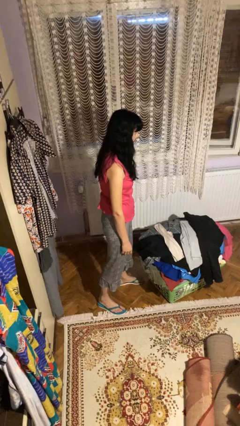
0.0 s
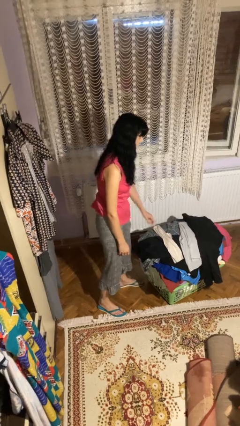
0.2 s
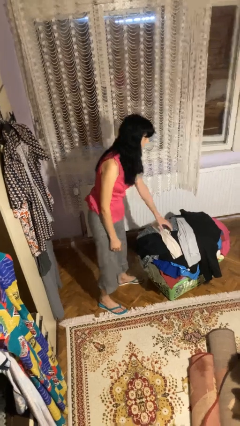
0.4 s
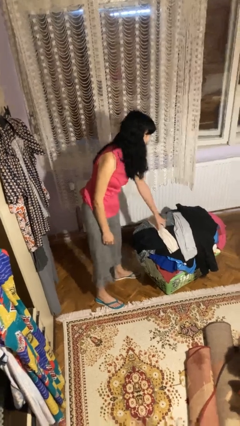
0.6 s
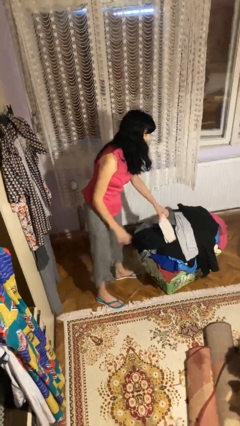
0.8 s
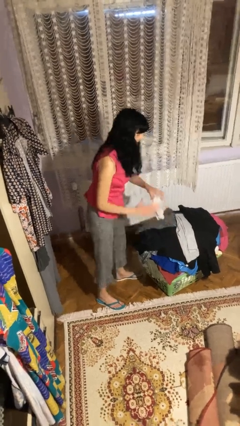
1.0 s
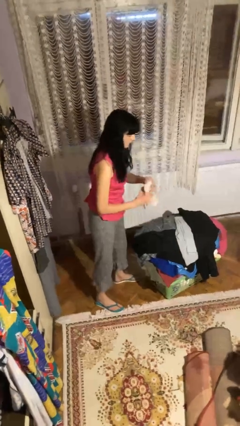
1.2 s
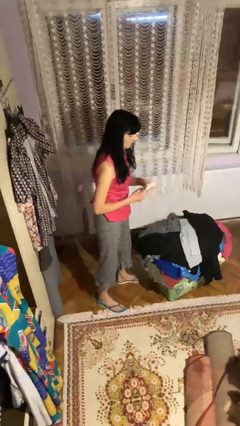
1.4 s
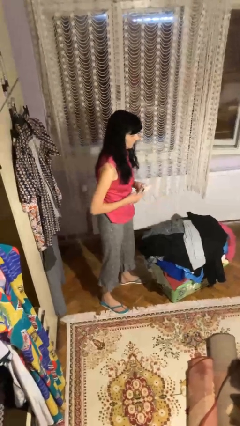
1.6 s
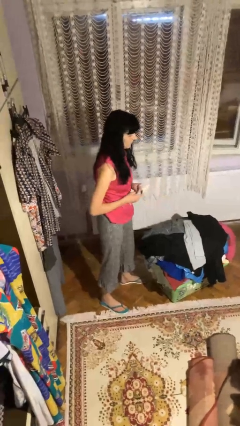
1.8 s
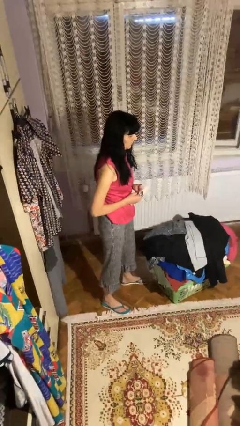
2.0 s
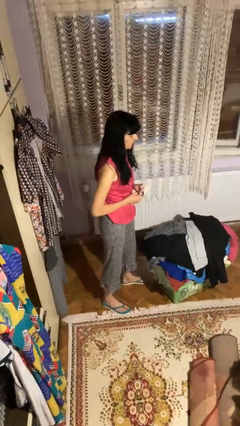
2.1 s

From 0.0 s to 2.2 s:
person folds socks

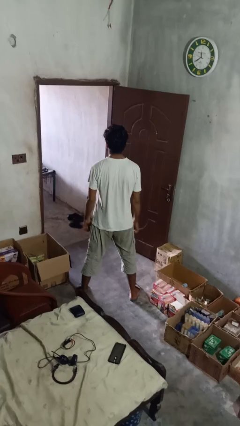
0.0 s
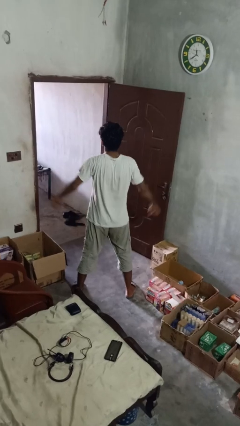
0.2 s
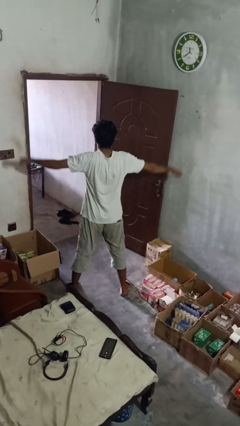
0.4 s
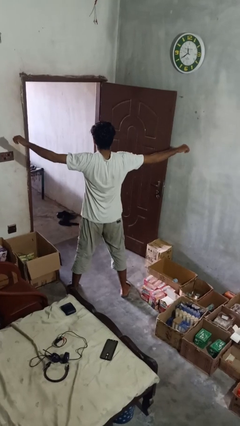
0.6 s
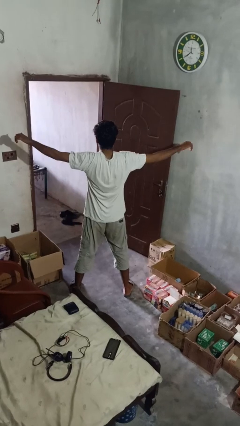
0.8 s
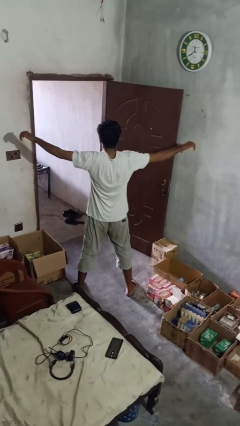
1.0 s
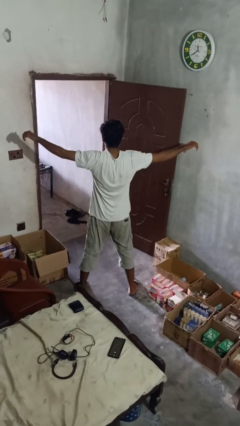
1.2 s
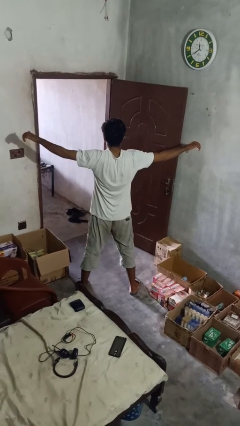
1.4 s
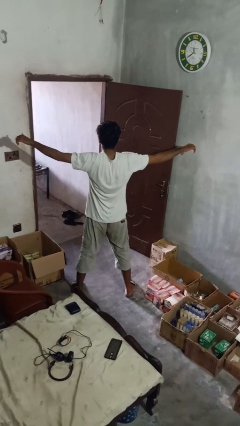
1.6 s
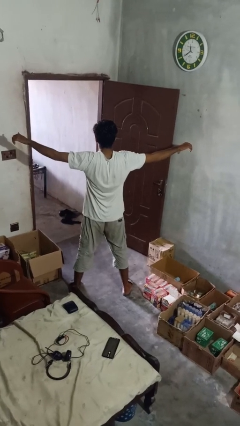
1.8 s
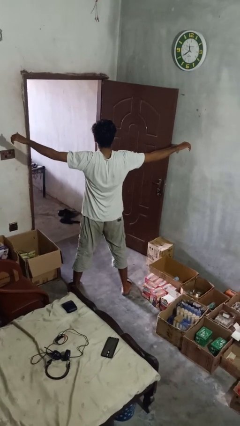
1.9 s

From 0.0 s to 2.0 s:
person stretches arms to side

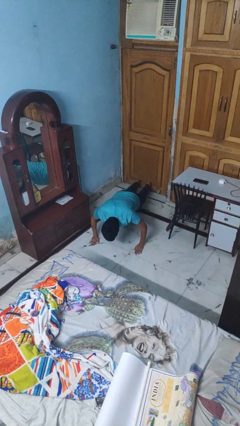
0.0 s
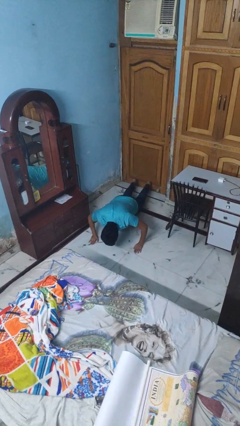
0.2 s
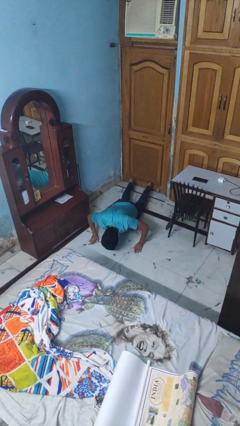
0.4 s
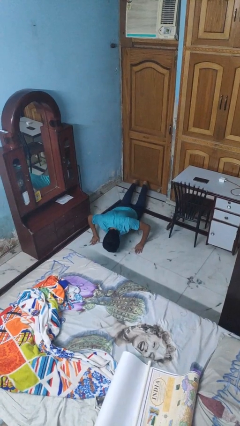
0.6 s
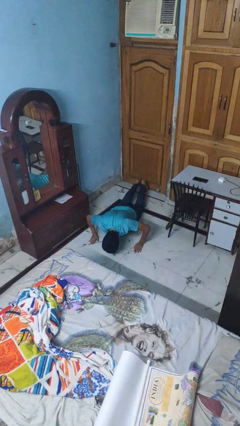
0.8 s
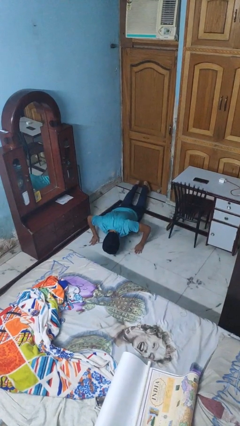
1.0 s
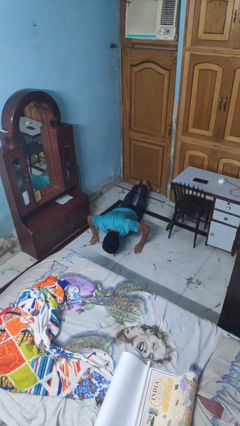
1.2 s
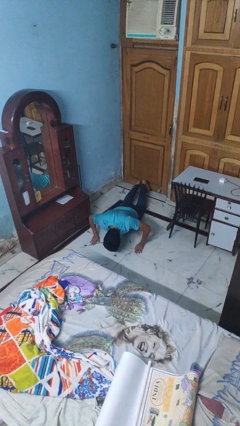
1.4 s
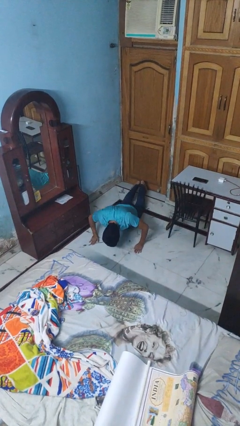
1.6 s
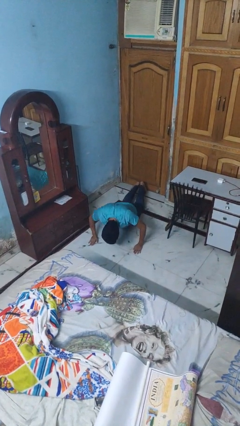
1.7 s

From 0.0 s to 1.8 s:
person exercises with pushup

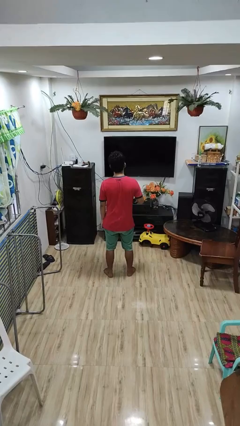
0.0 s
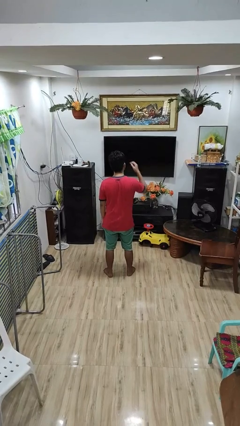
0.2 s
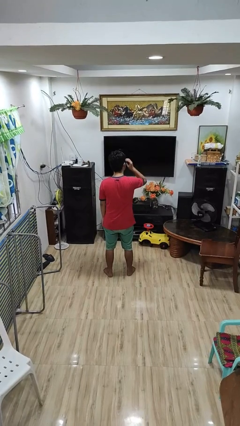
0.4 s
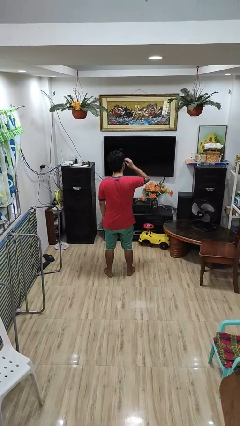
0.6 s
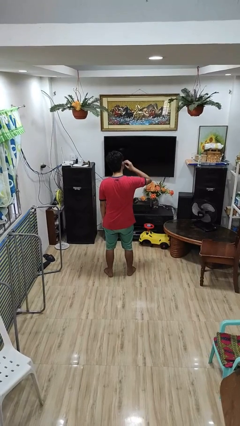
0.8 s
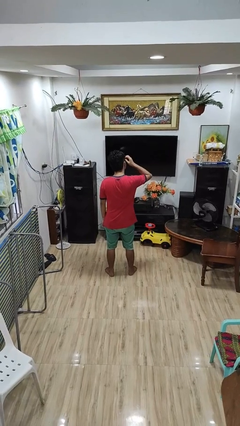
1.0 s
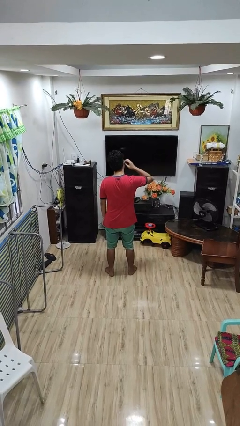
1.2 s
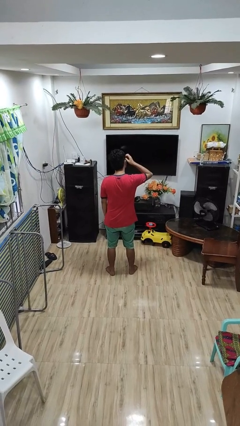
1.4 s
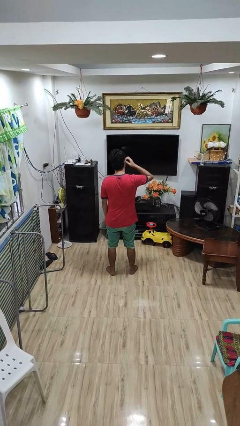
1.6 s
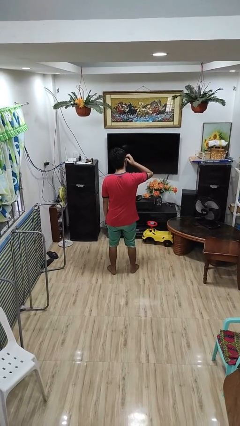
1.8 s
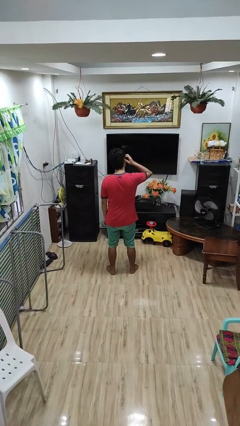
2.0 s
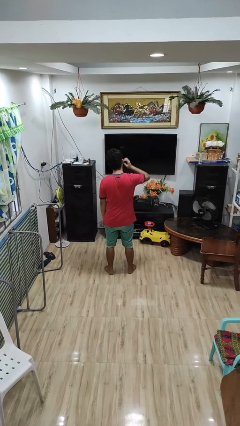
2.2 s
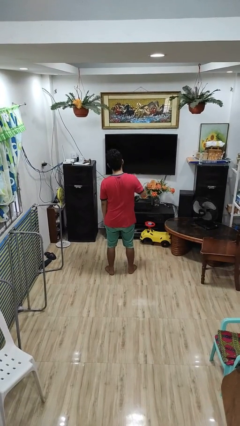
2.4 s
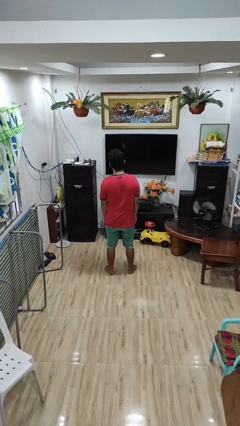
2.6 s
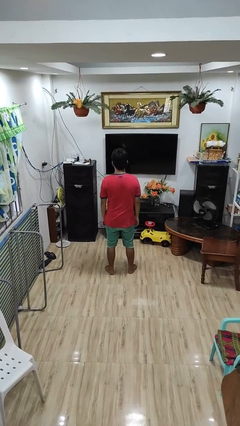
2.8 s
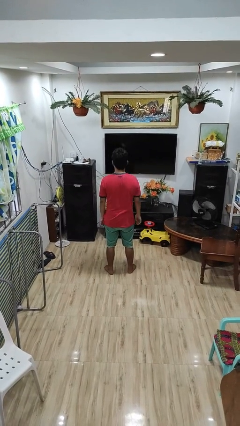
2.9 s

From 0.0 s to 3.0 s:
person scratches face

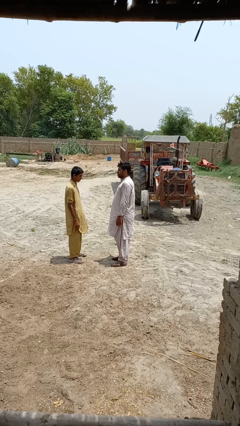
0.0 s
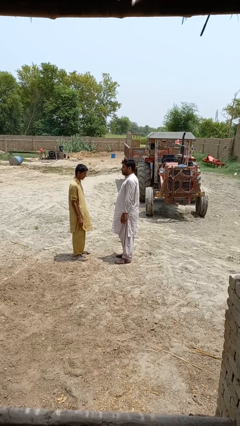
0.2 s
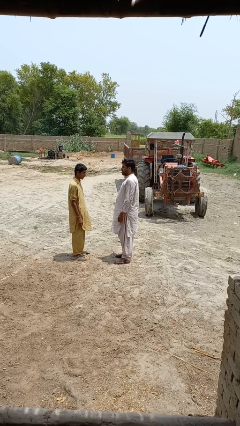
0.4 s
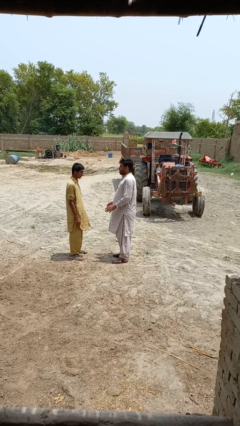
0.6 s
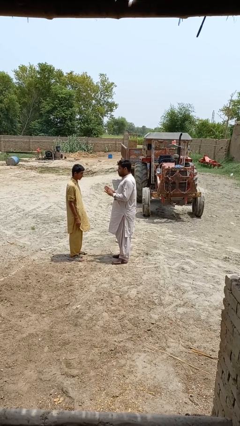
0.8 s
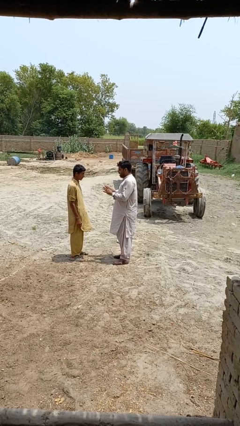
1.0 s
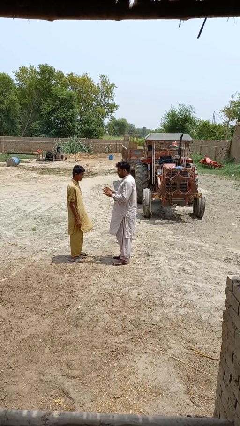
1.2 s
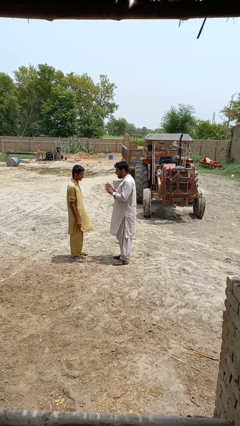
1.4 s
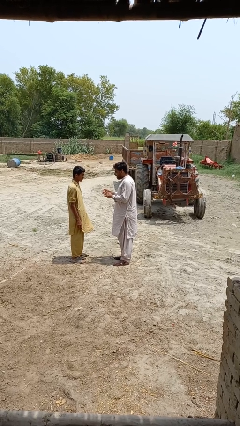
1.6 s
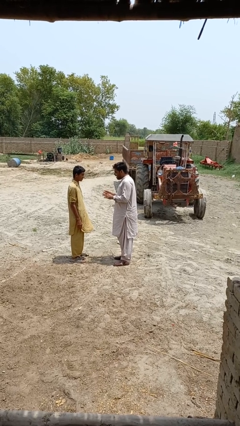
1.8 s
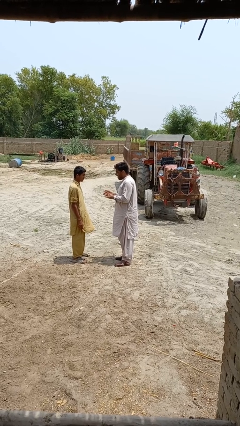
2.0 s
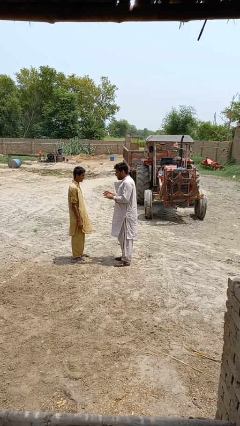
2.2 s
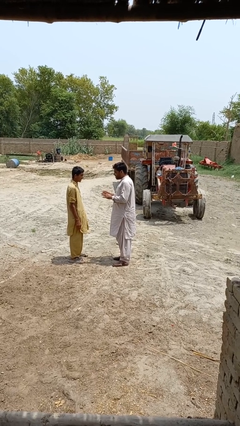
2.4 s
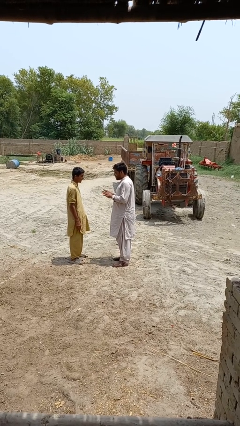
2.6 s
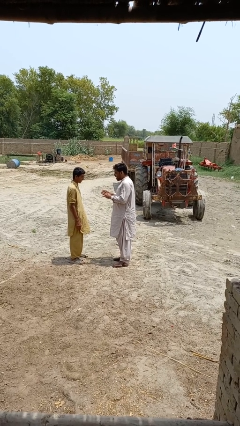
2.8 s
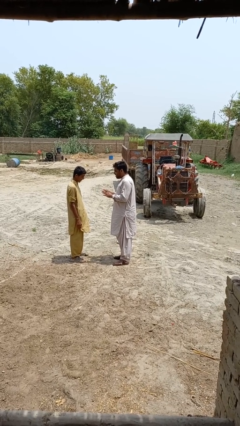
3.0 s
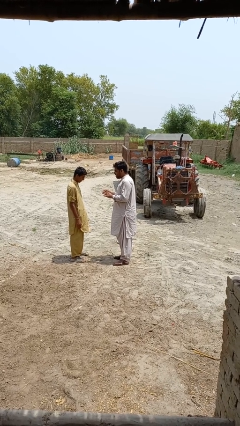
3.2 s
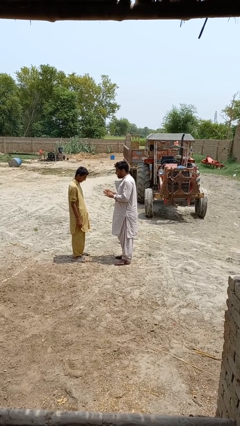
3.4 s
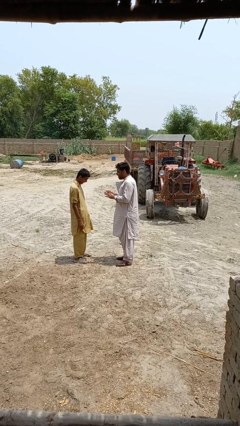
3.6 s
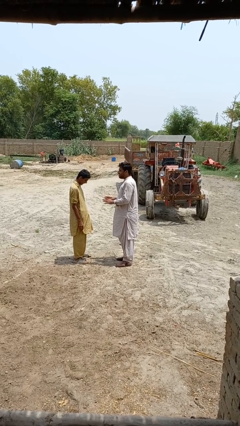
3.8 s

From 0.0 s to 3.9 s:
person talks to person

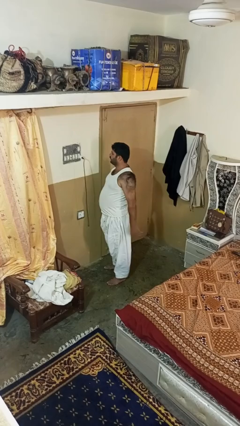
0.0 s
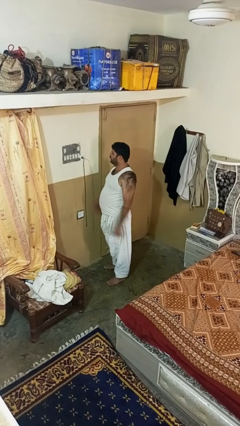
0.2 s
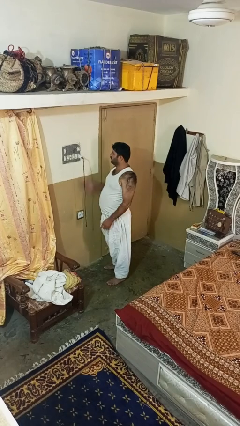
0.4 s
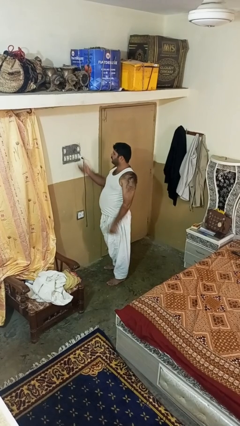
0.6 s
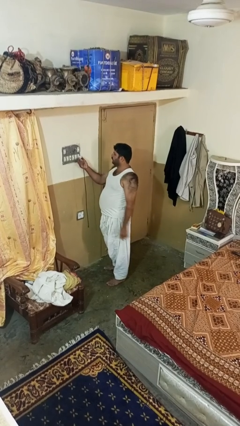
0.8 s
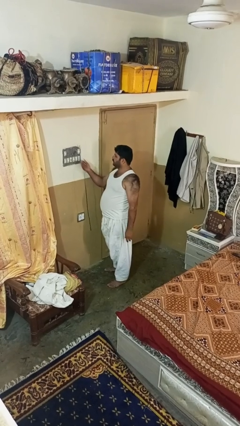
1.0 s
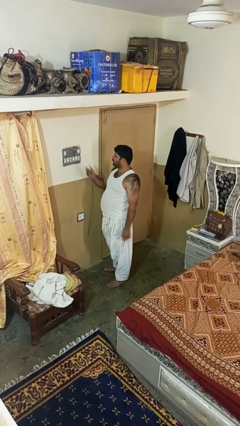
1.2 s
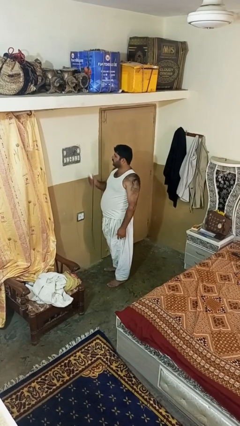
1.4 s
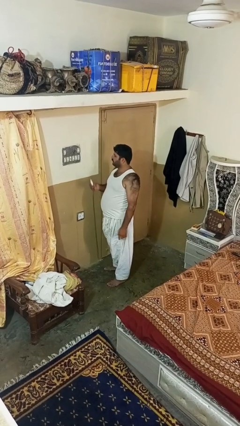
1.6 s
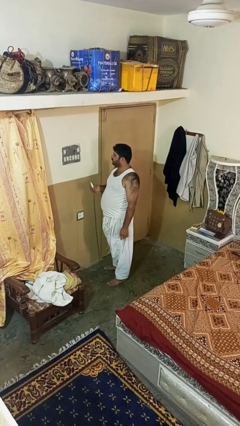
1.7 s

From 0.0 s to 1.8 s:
person unplugs from electrical socket

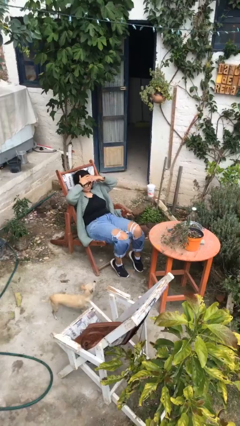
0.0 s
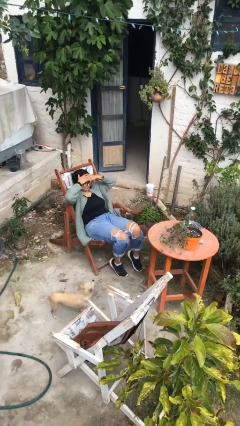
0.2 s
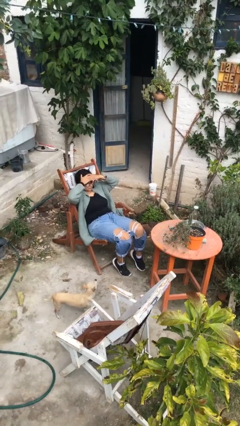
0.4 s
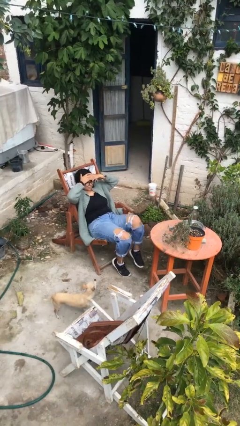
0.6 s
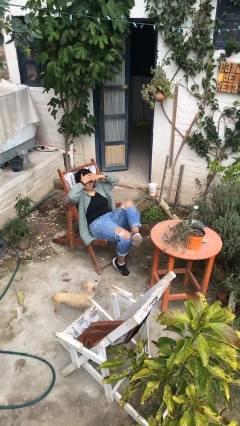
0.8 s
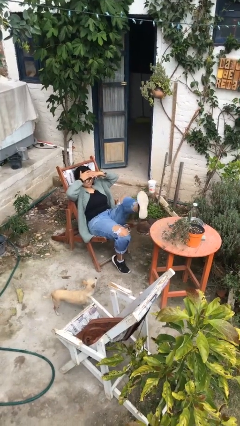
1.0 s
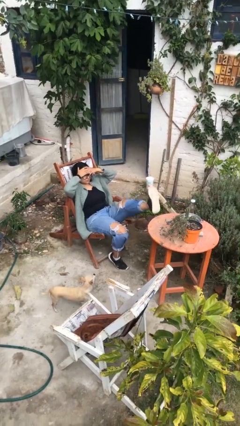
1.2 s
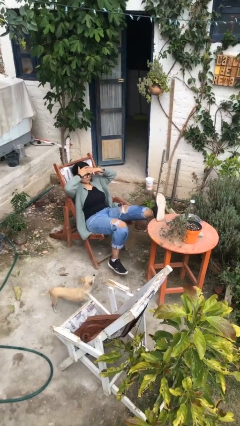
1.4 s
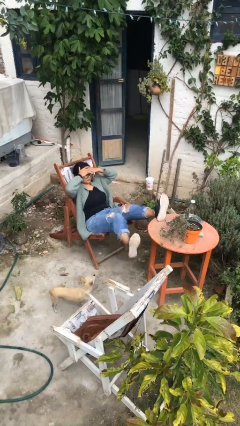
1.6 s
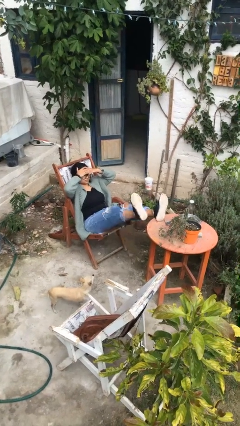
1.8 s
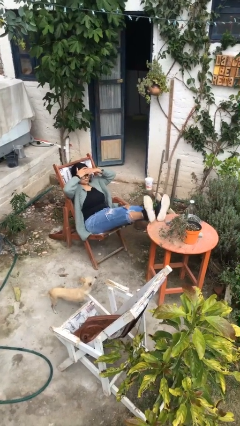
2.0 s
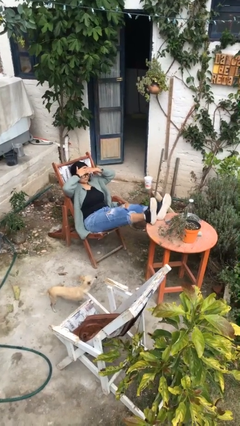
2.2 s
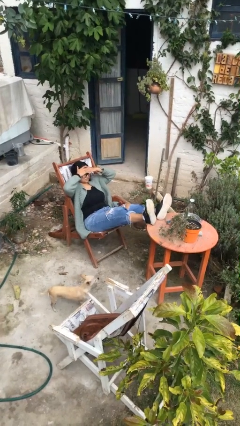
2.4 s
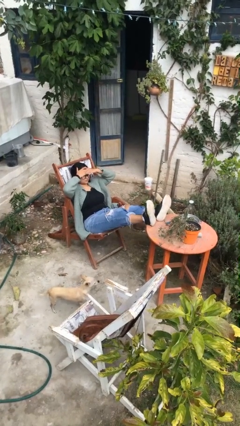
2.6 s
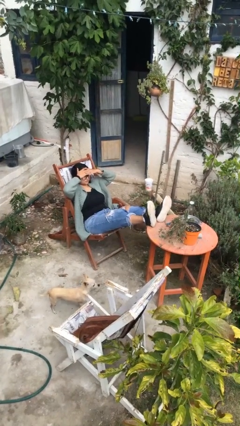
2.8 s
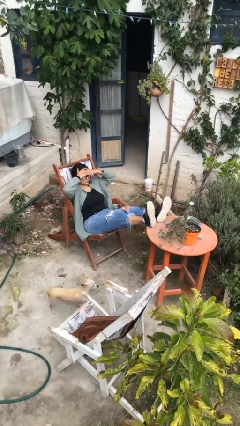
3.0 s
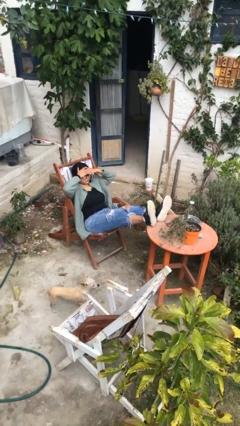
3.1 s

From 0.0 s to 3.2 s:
person puts feet up
